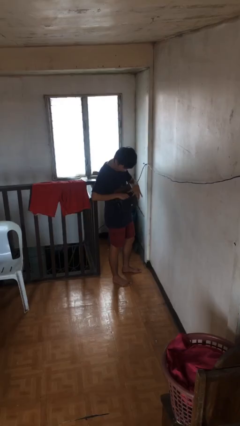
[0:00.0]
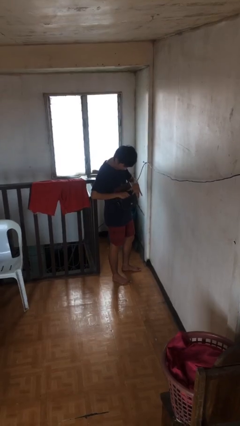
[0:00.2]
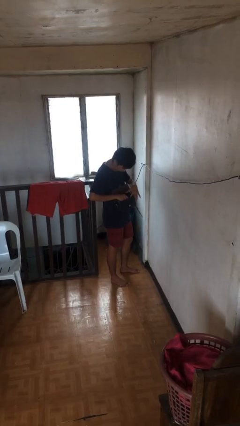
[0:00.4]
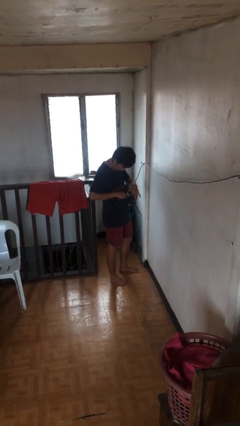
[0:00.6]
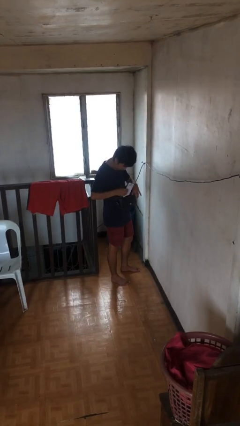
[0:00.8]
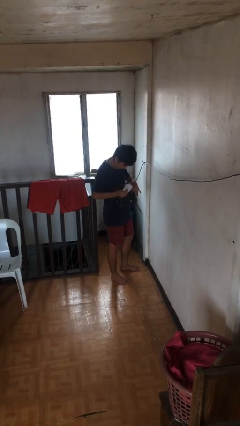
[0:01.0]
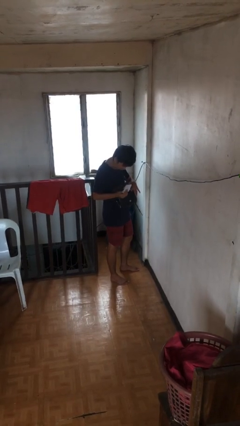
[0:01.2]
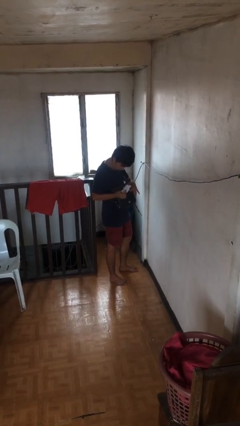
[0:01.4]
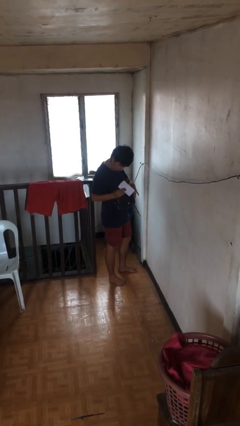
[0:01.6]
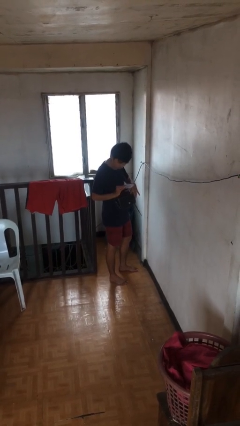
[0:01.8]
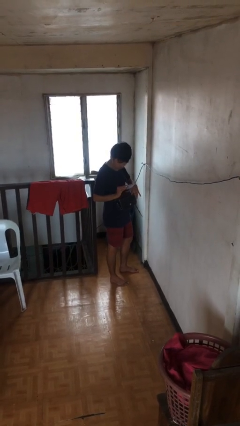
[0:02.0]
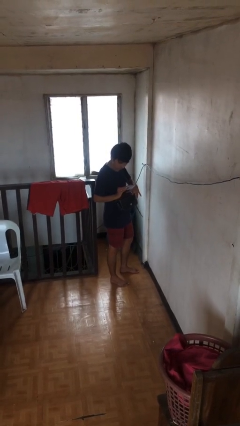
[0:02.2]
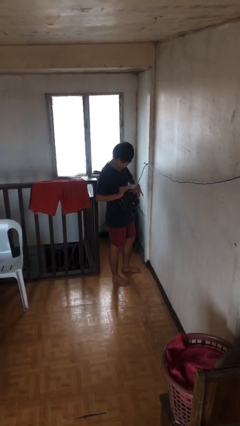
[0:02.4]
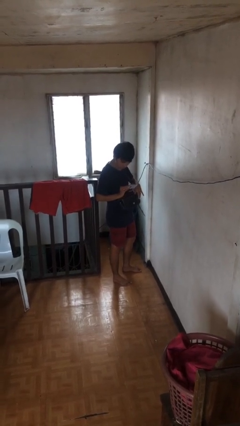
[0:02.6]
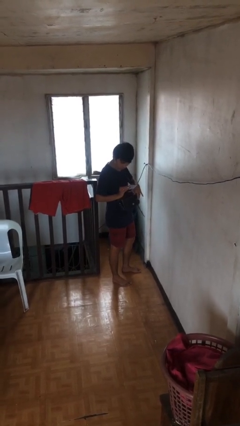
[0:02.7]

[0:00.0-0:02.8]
person takes object from purse

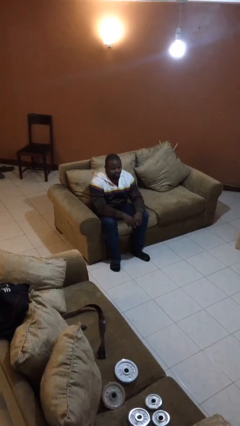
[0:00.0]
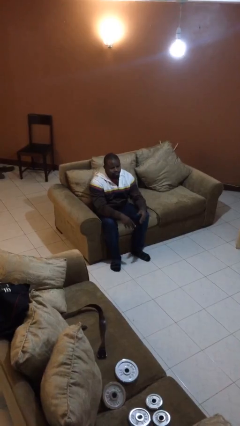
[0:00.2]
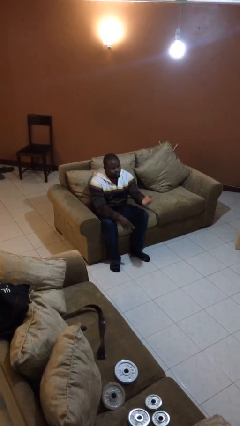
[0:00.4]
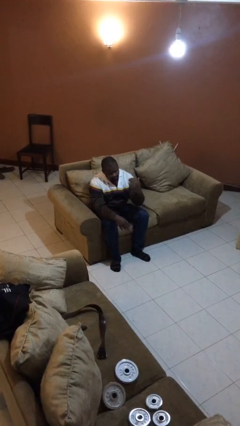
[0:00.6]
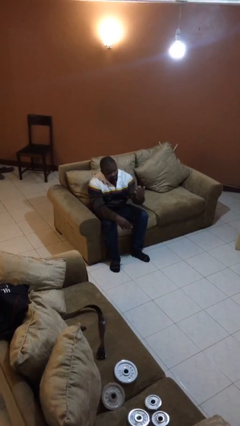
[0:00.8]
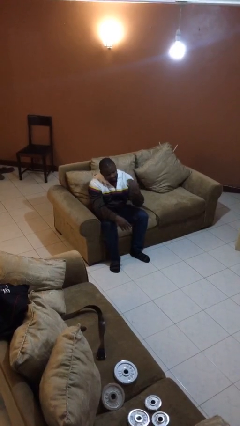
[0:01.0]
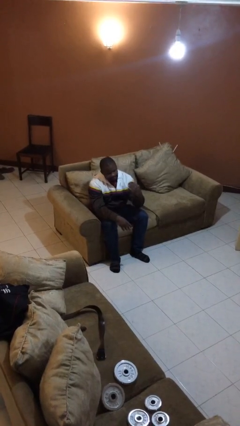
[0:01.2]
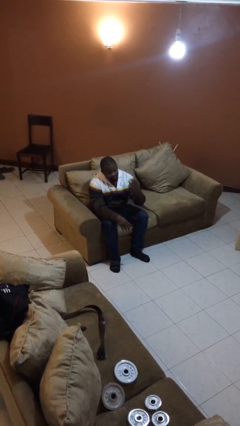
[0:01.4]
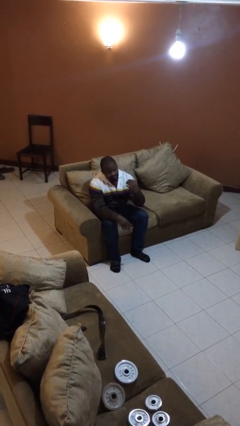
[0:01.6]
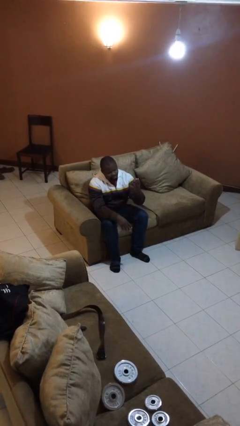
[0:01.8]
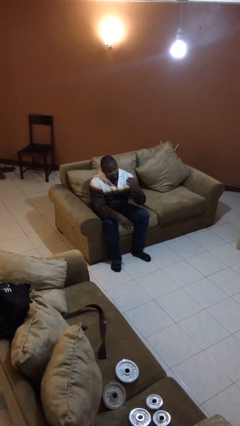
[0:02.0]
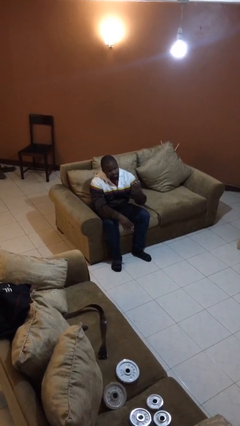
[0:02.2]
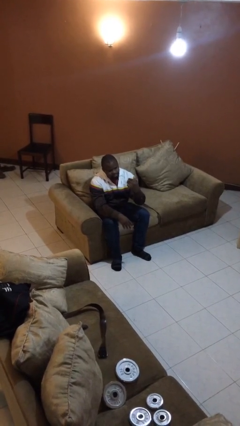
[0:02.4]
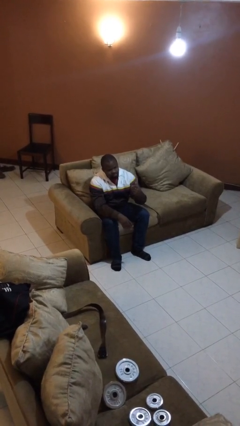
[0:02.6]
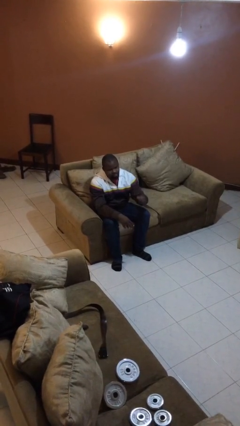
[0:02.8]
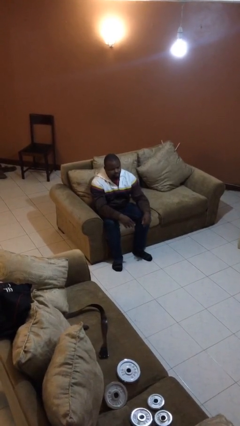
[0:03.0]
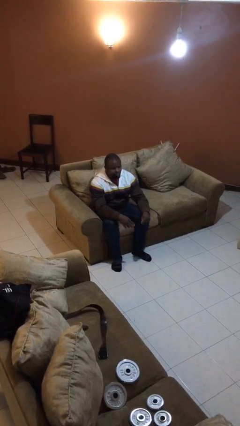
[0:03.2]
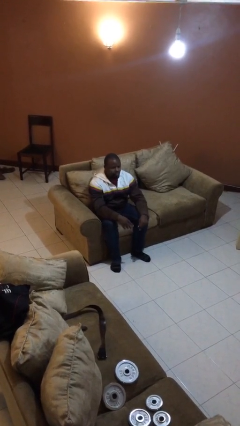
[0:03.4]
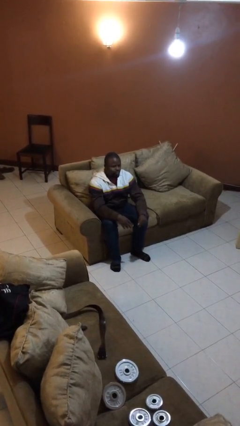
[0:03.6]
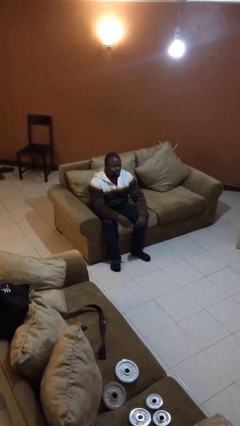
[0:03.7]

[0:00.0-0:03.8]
person gestures come here

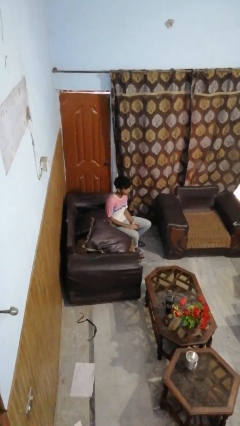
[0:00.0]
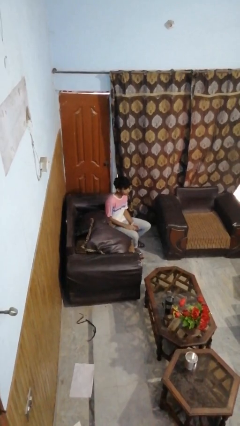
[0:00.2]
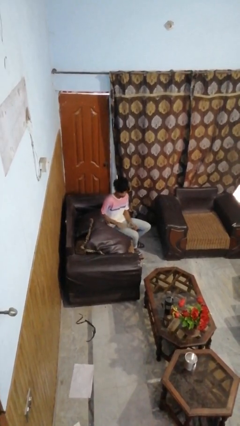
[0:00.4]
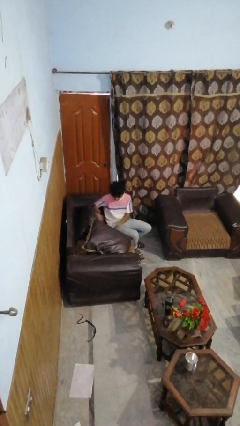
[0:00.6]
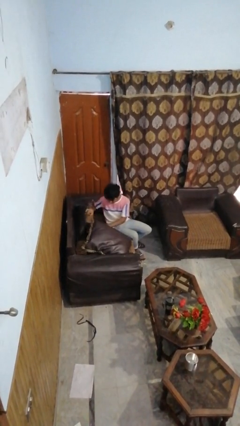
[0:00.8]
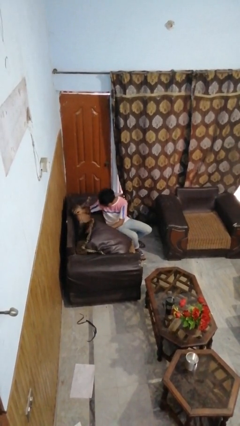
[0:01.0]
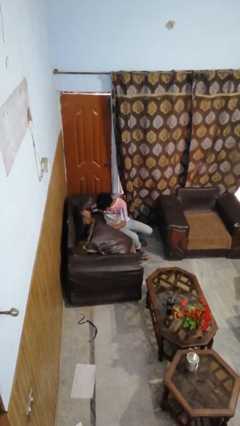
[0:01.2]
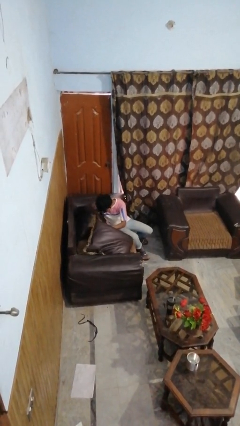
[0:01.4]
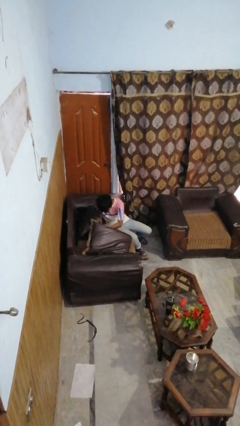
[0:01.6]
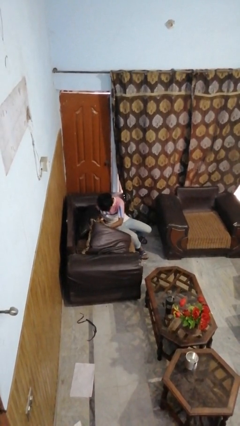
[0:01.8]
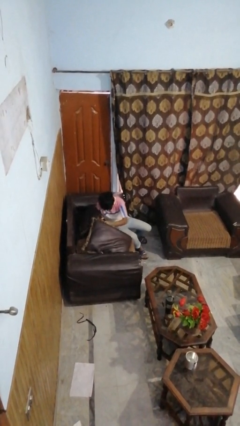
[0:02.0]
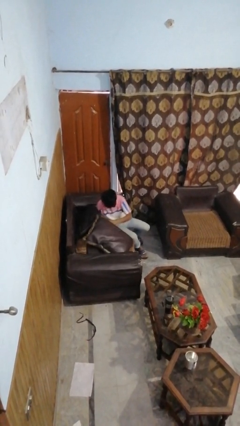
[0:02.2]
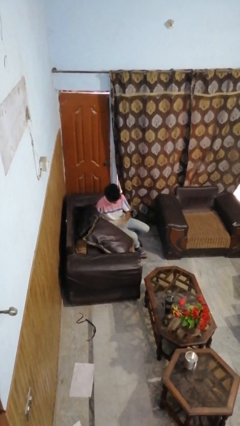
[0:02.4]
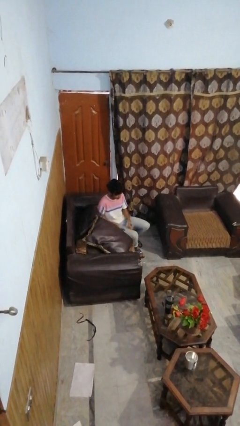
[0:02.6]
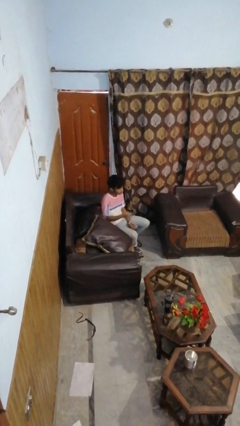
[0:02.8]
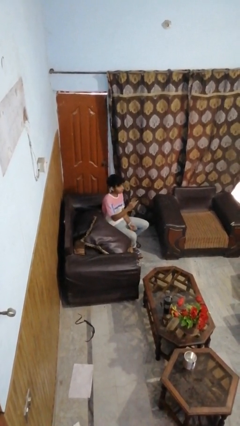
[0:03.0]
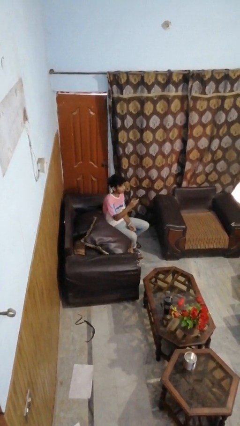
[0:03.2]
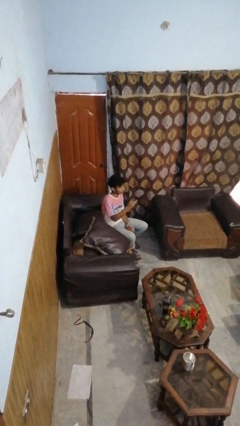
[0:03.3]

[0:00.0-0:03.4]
person searches in couch

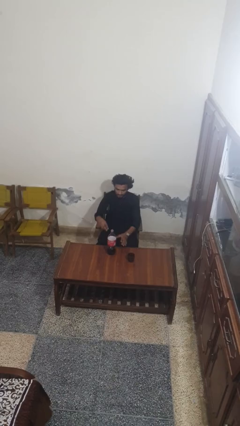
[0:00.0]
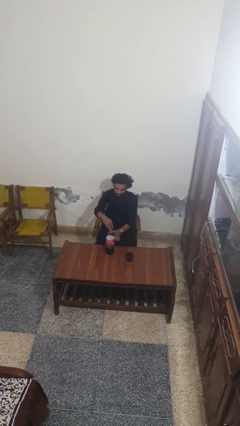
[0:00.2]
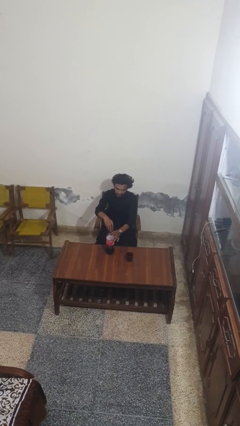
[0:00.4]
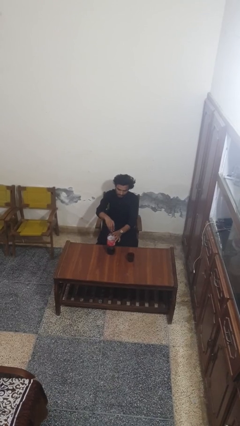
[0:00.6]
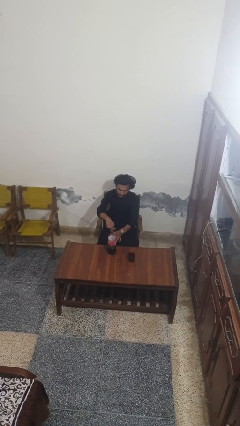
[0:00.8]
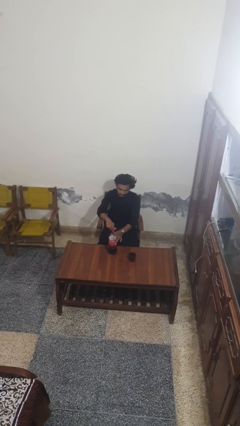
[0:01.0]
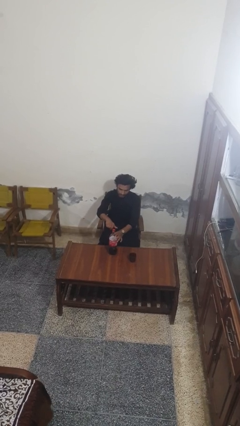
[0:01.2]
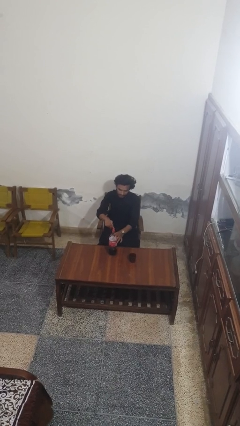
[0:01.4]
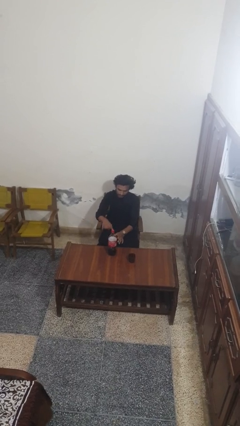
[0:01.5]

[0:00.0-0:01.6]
person screws lid to bottle

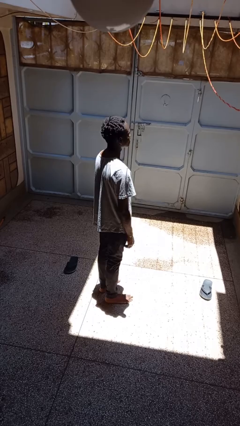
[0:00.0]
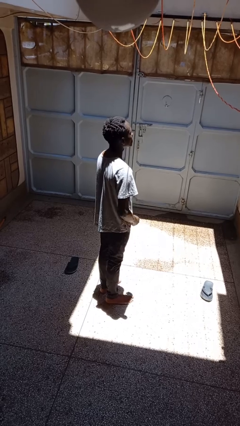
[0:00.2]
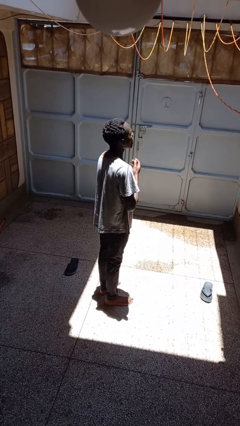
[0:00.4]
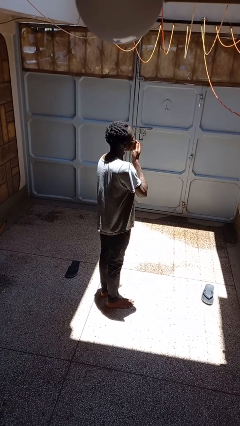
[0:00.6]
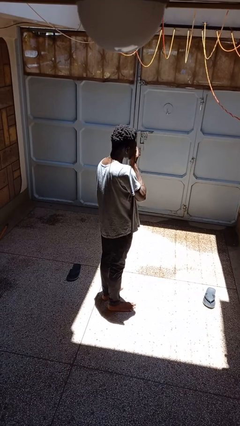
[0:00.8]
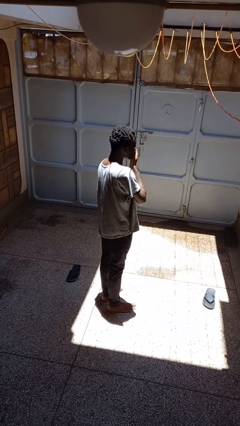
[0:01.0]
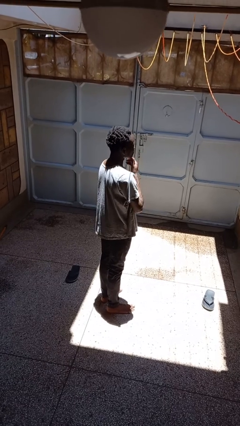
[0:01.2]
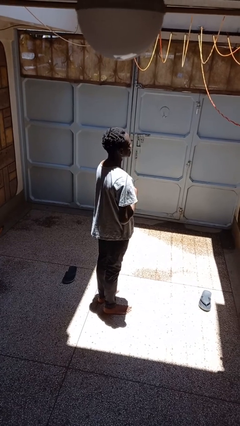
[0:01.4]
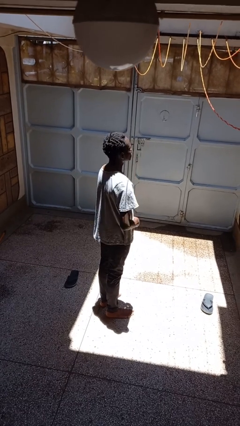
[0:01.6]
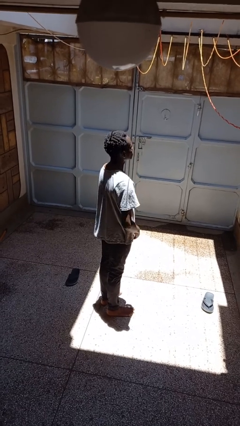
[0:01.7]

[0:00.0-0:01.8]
person sneezes into hand

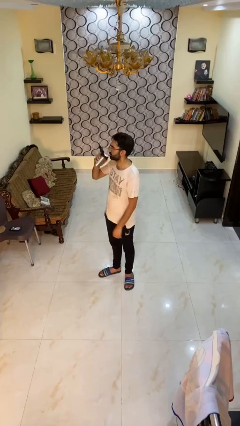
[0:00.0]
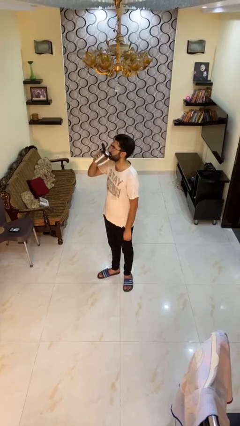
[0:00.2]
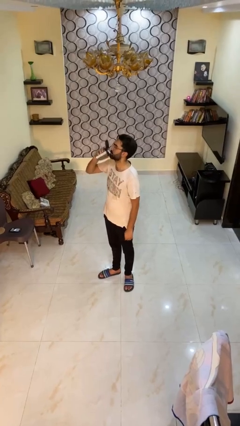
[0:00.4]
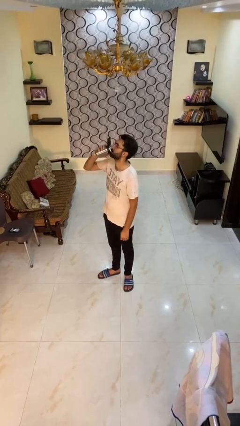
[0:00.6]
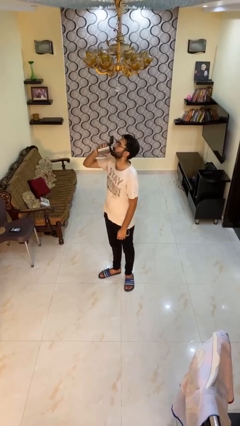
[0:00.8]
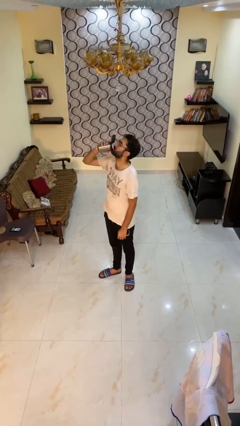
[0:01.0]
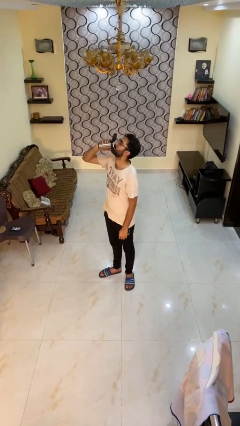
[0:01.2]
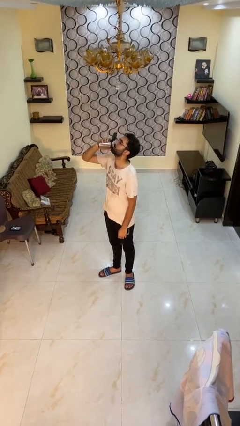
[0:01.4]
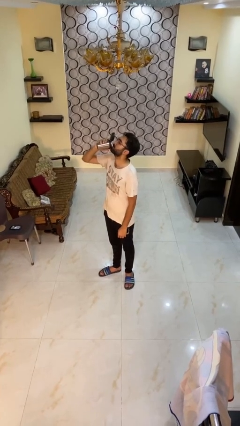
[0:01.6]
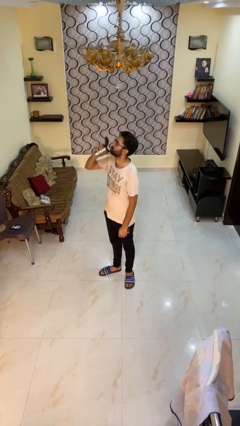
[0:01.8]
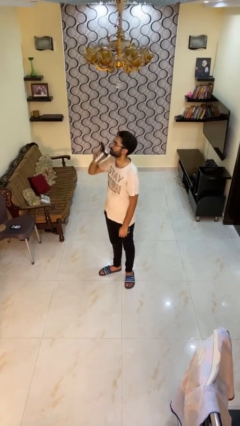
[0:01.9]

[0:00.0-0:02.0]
person drinks from beverage can

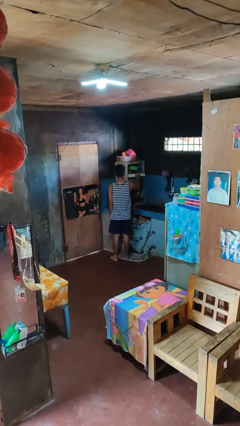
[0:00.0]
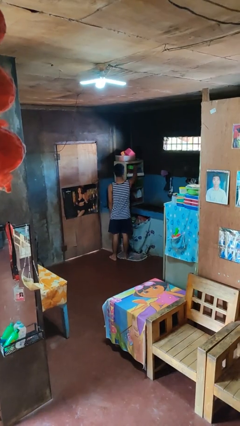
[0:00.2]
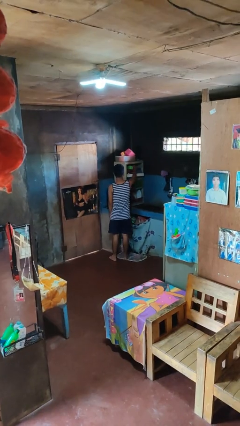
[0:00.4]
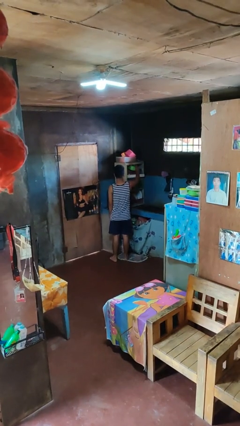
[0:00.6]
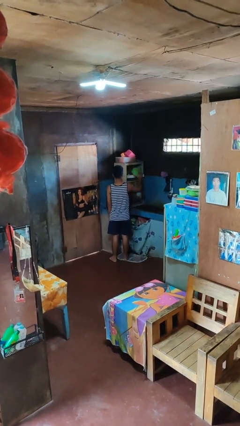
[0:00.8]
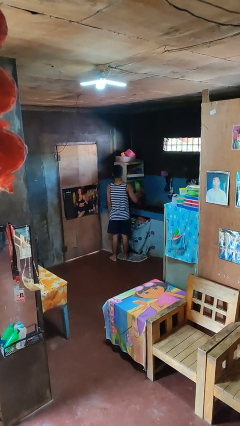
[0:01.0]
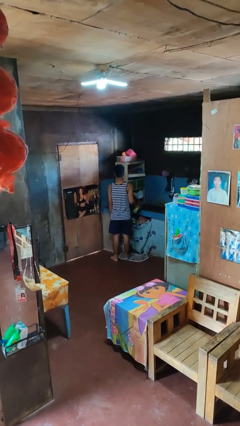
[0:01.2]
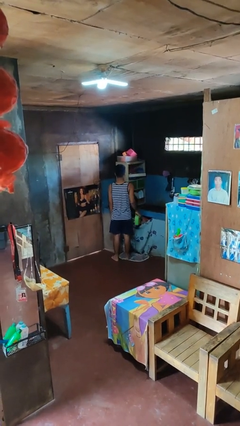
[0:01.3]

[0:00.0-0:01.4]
person takes object from cabinet

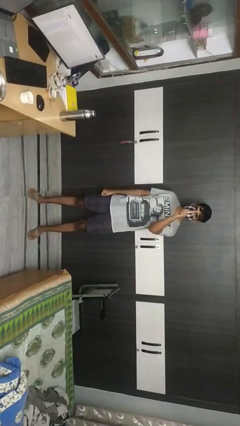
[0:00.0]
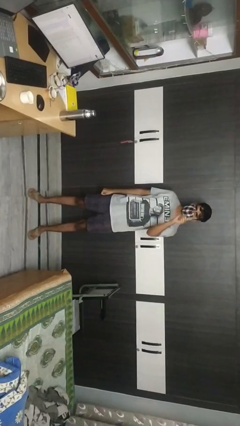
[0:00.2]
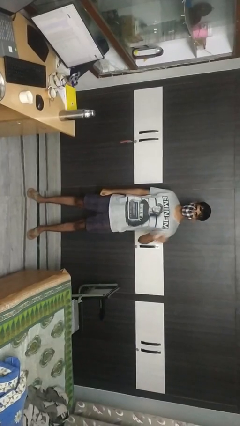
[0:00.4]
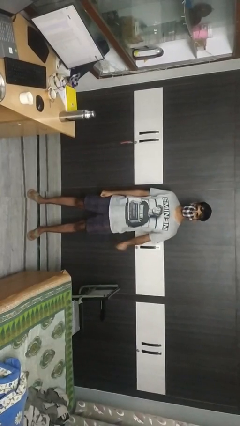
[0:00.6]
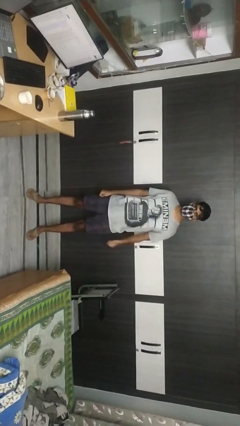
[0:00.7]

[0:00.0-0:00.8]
person gestures number one
